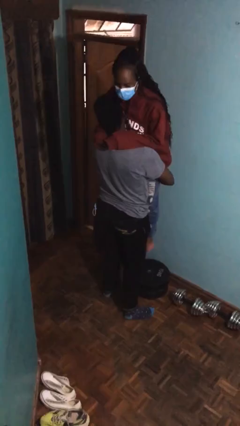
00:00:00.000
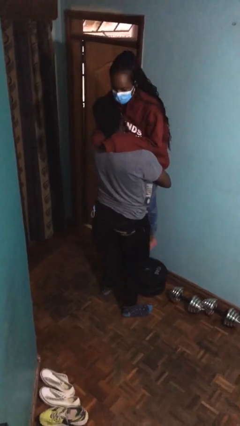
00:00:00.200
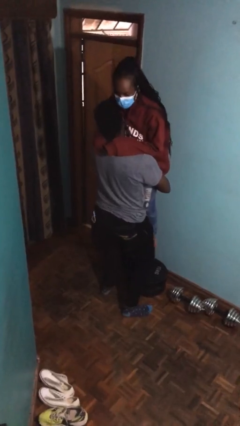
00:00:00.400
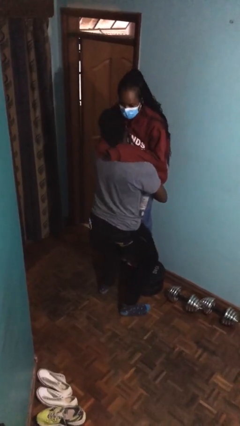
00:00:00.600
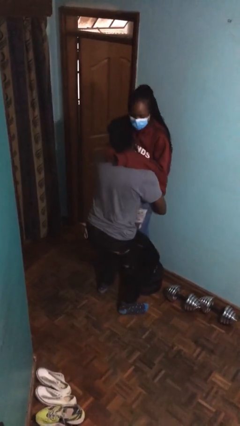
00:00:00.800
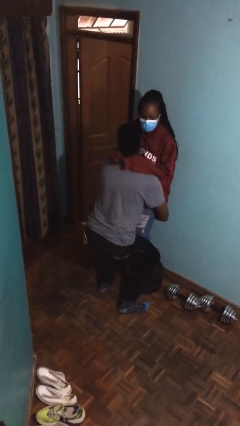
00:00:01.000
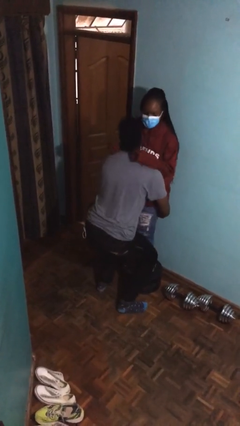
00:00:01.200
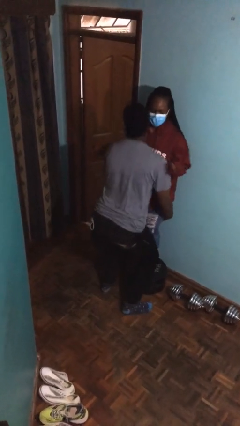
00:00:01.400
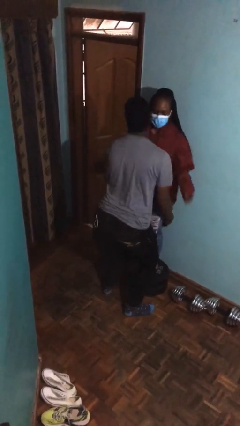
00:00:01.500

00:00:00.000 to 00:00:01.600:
person puts down person

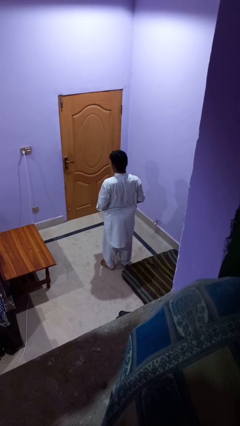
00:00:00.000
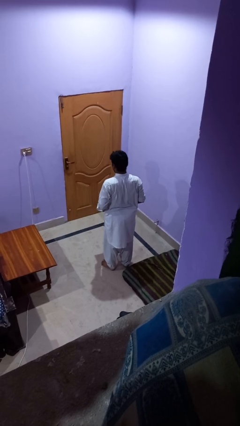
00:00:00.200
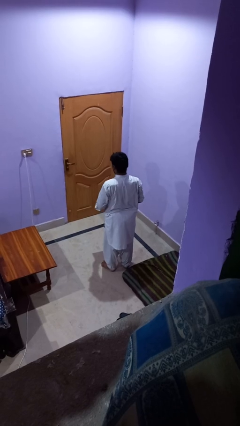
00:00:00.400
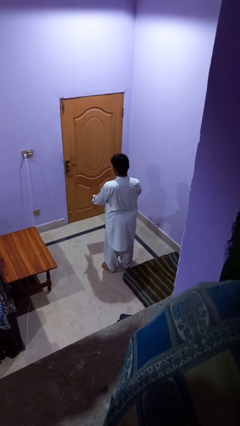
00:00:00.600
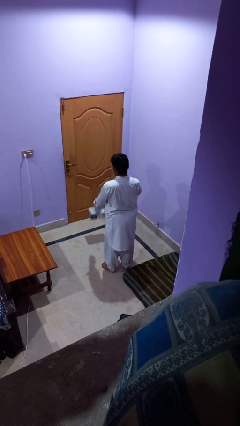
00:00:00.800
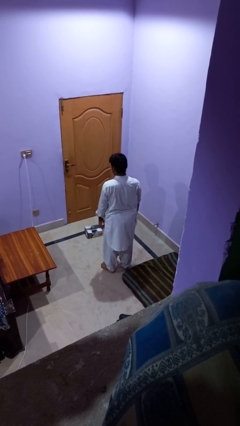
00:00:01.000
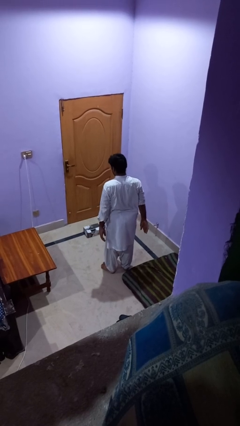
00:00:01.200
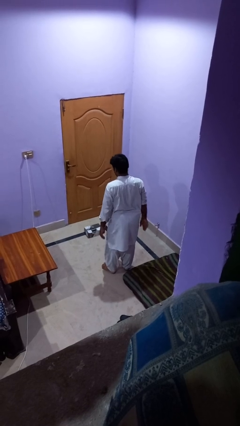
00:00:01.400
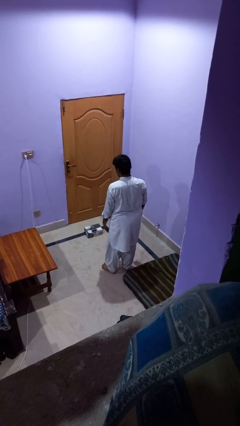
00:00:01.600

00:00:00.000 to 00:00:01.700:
person throws object to ground

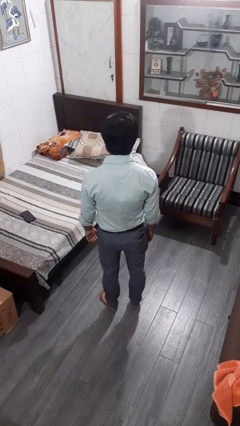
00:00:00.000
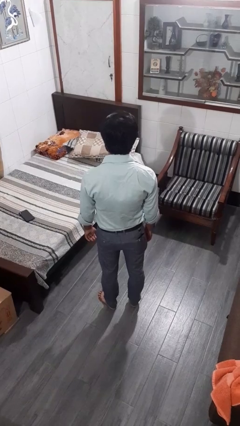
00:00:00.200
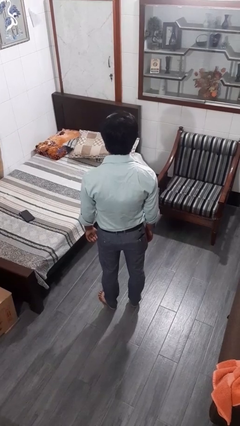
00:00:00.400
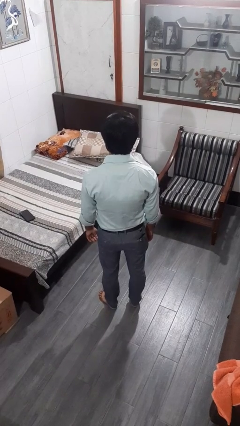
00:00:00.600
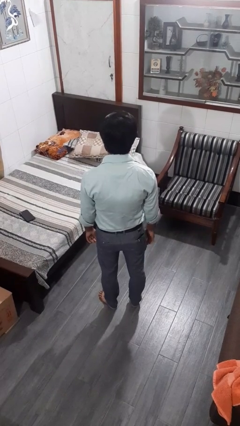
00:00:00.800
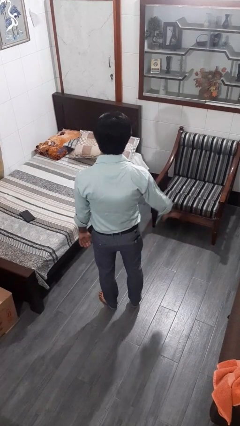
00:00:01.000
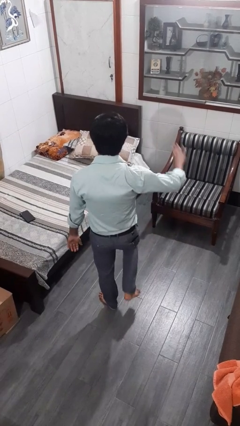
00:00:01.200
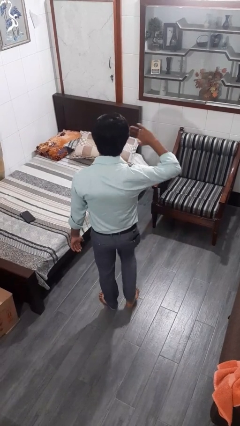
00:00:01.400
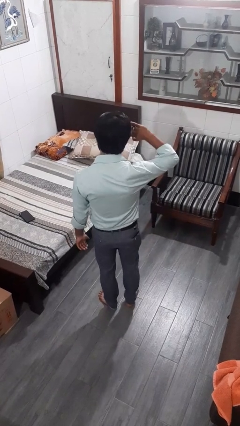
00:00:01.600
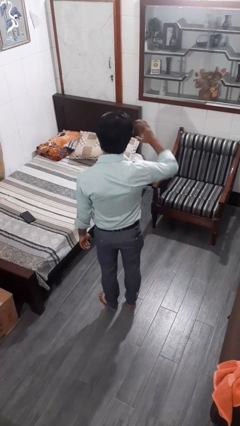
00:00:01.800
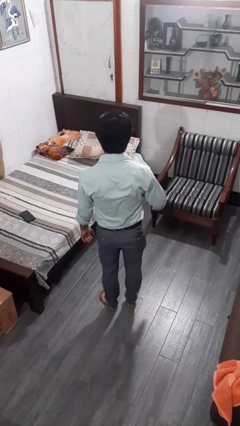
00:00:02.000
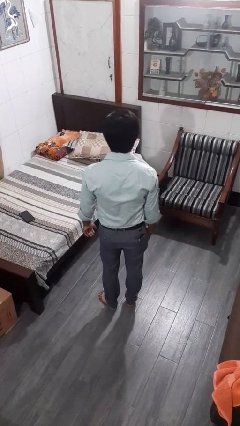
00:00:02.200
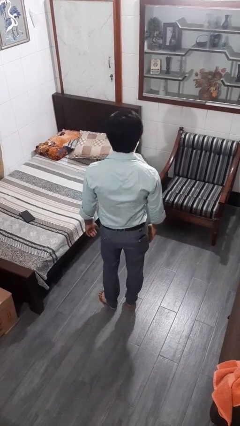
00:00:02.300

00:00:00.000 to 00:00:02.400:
person salutes

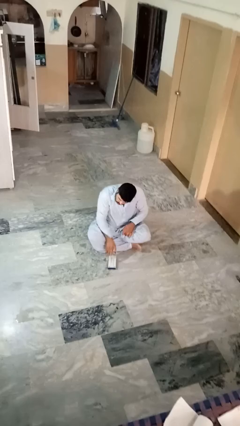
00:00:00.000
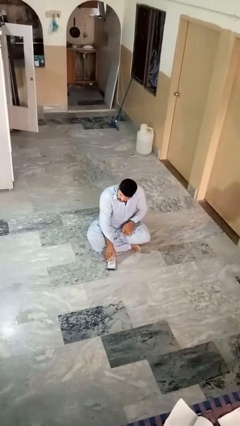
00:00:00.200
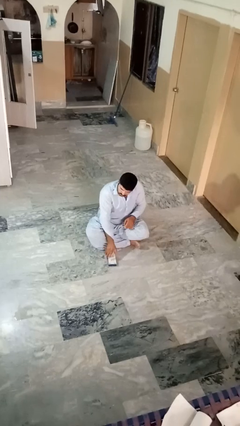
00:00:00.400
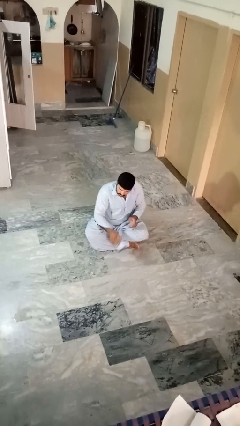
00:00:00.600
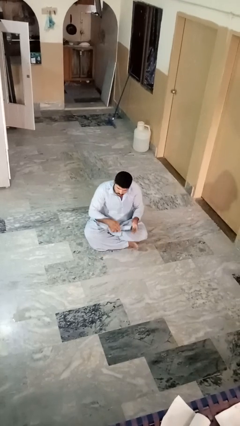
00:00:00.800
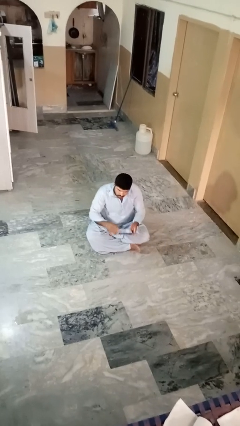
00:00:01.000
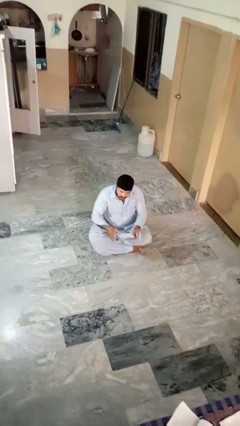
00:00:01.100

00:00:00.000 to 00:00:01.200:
person picks up object from floor

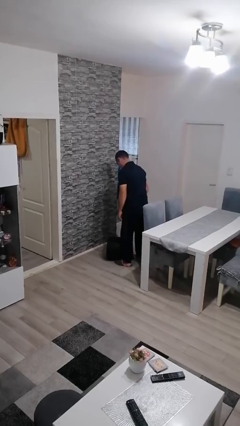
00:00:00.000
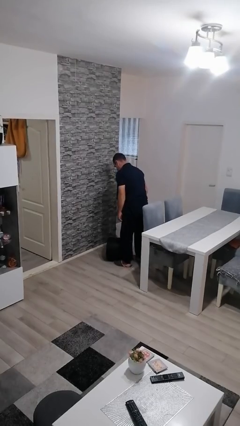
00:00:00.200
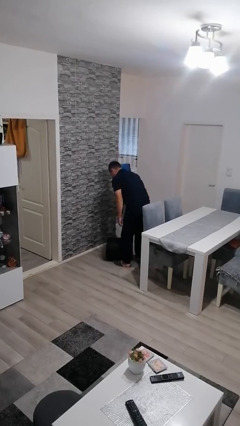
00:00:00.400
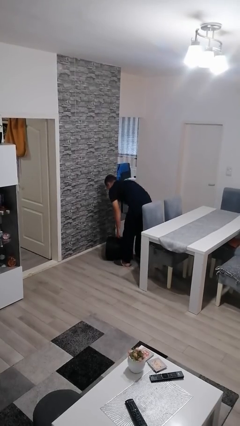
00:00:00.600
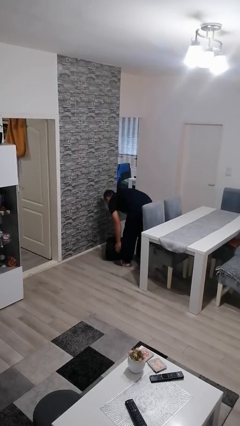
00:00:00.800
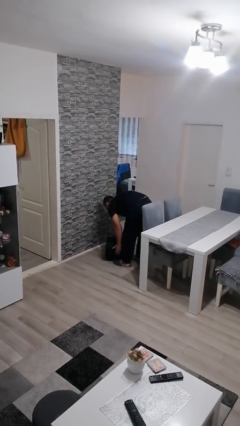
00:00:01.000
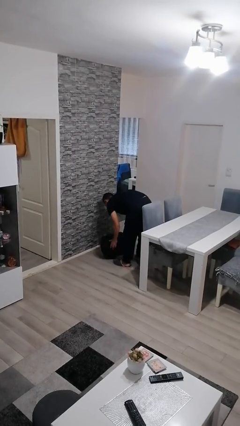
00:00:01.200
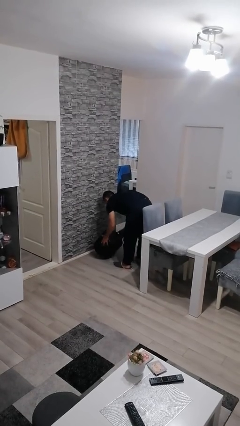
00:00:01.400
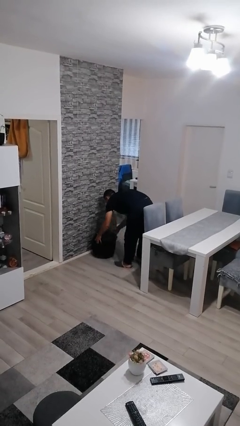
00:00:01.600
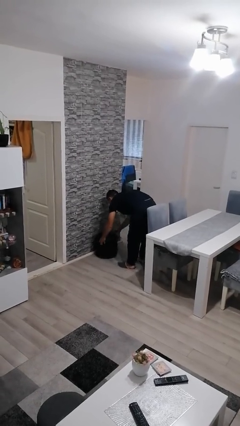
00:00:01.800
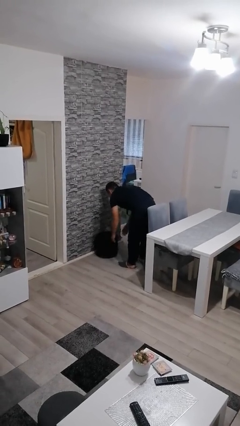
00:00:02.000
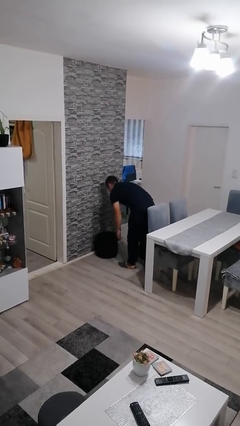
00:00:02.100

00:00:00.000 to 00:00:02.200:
person sets upright furniture

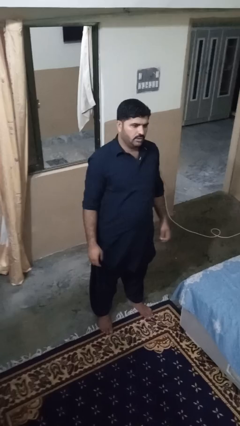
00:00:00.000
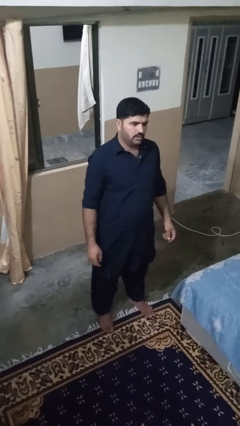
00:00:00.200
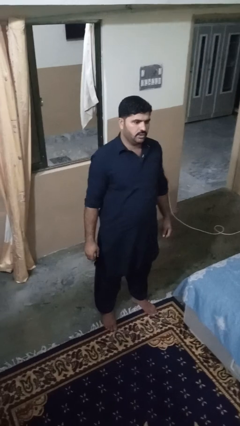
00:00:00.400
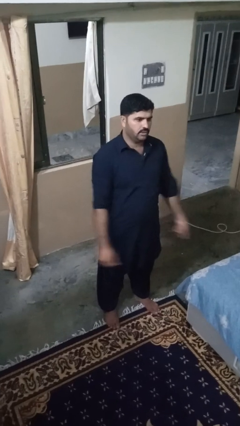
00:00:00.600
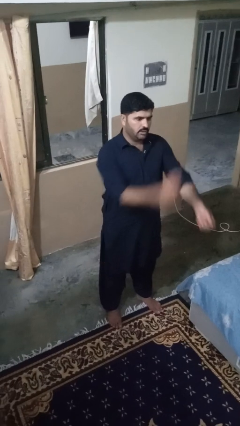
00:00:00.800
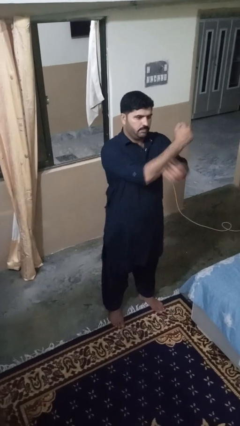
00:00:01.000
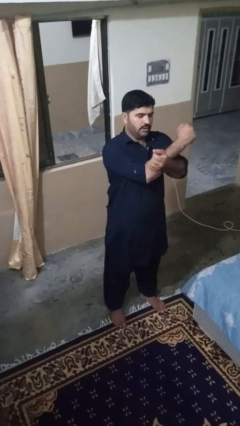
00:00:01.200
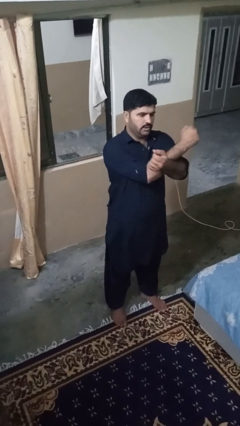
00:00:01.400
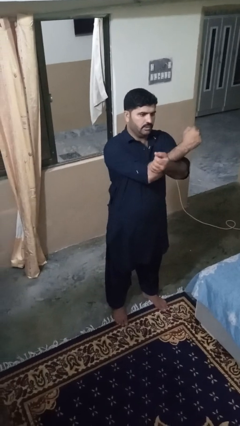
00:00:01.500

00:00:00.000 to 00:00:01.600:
person crosses arms

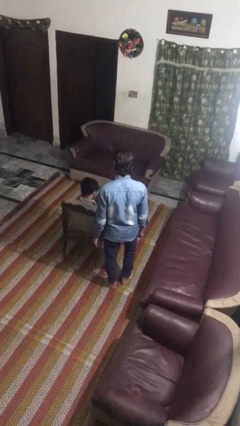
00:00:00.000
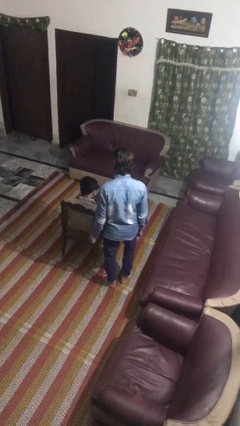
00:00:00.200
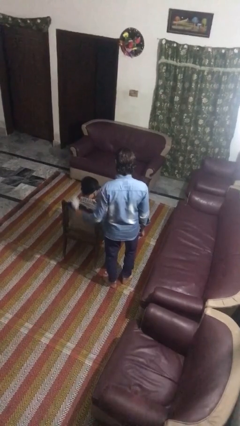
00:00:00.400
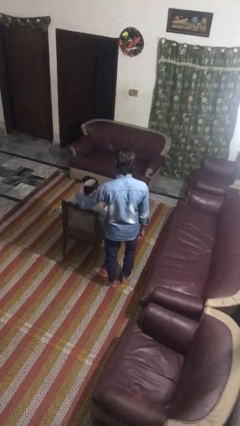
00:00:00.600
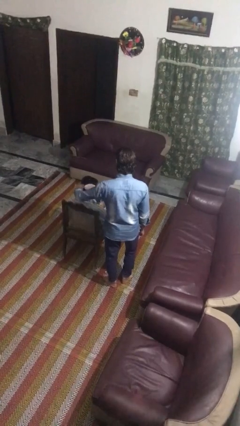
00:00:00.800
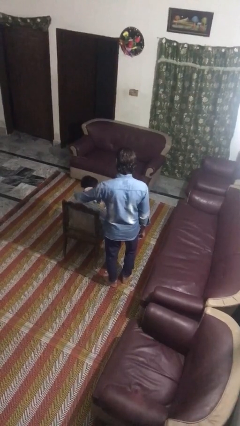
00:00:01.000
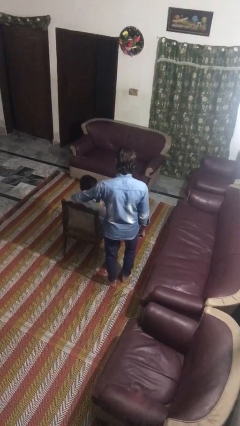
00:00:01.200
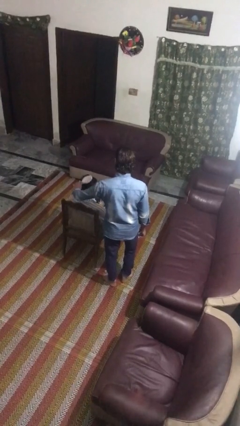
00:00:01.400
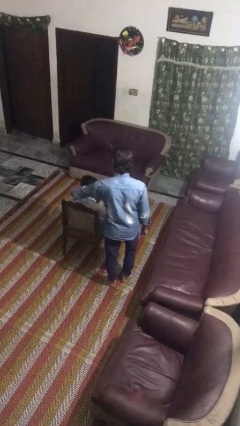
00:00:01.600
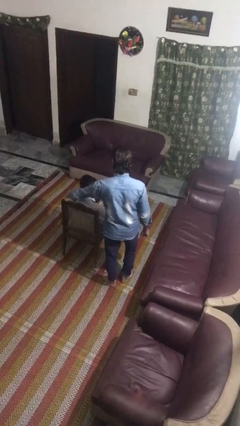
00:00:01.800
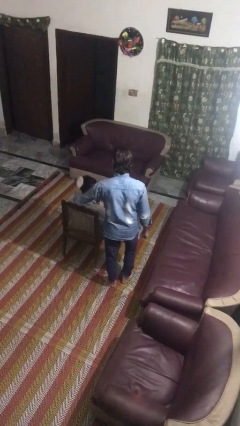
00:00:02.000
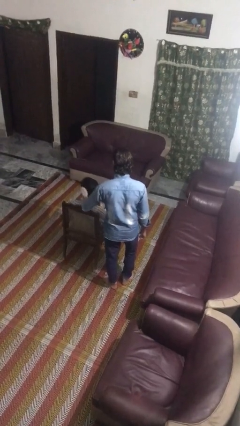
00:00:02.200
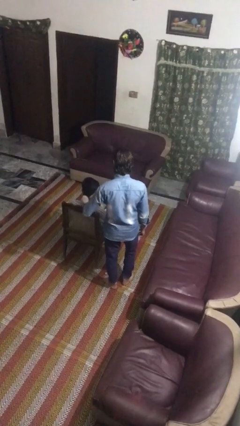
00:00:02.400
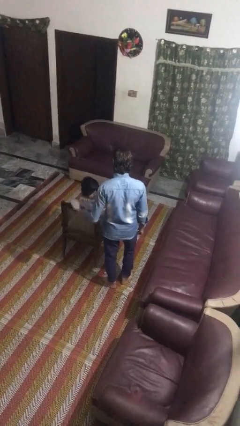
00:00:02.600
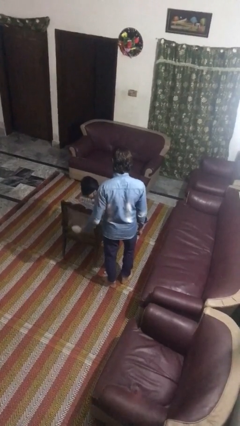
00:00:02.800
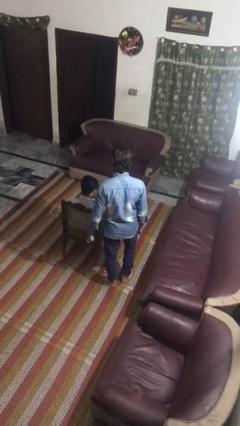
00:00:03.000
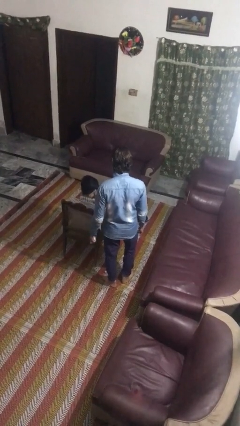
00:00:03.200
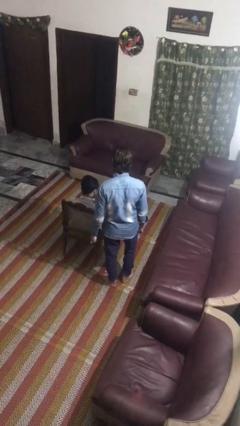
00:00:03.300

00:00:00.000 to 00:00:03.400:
person brushes hair of person

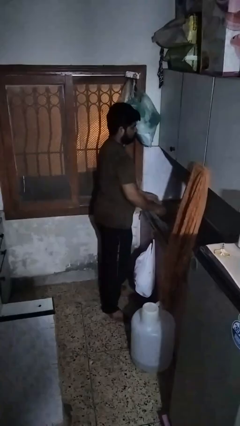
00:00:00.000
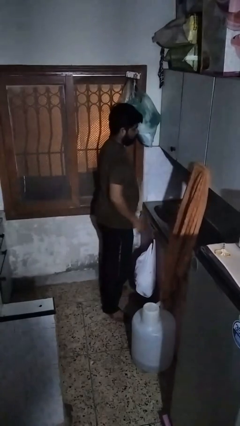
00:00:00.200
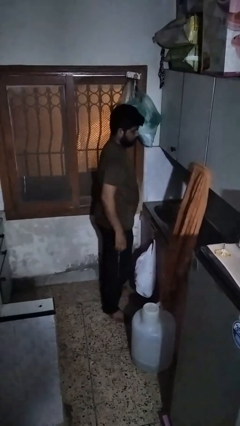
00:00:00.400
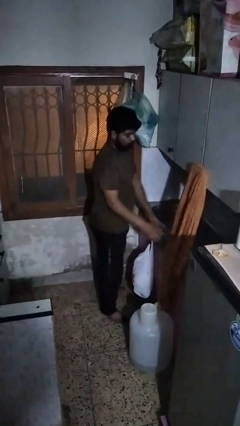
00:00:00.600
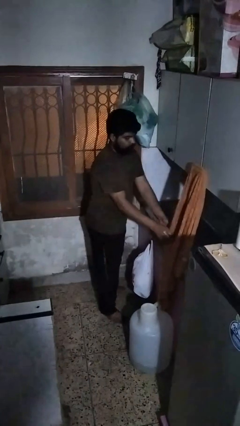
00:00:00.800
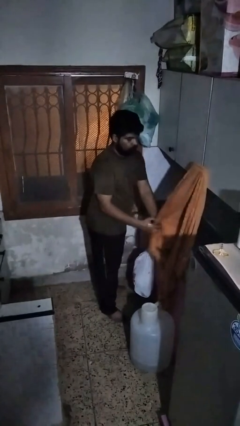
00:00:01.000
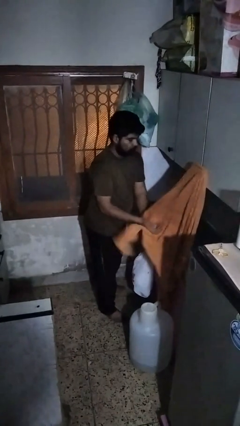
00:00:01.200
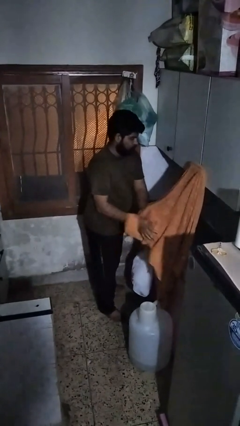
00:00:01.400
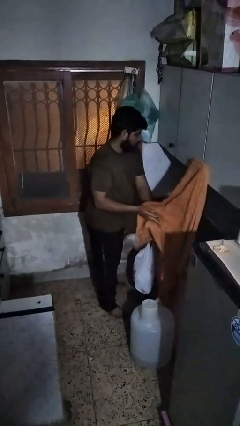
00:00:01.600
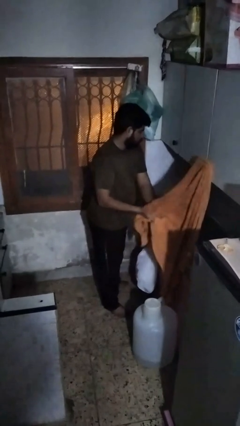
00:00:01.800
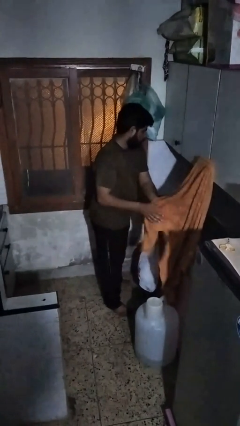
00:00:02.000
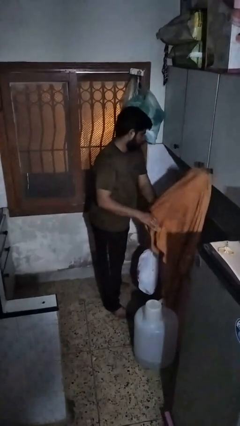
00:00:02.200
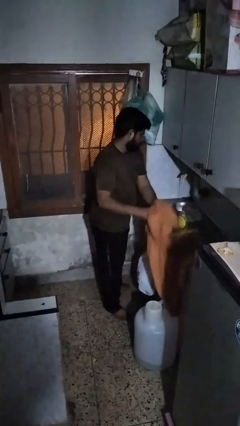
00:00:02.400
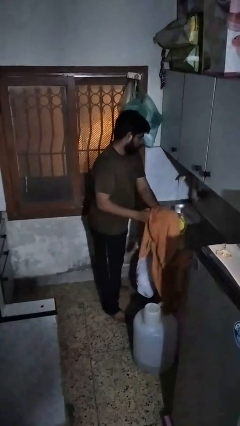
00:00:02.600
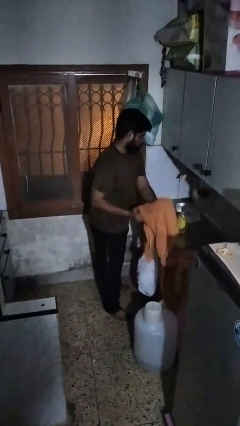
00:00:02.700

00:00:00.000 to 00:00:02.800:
person dries hands with towel
